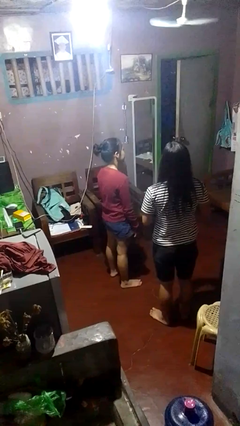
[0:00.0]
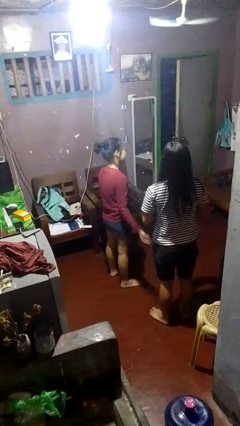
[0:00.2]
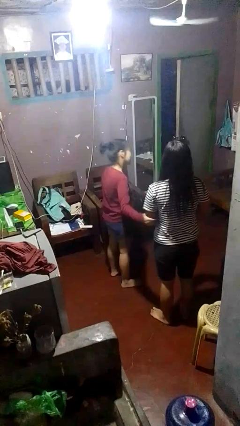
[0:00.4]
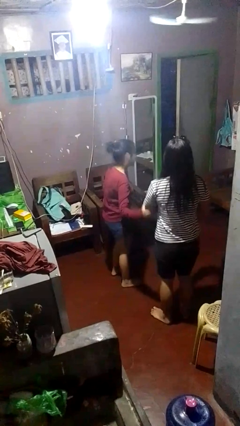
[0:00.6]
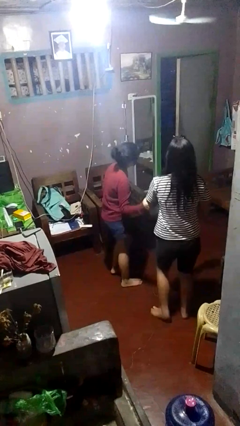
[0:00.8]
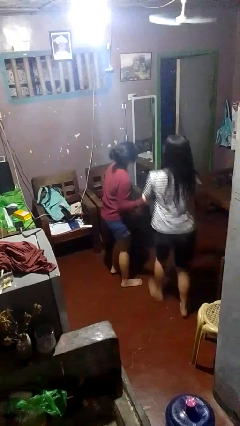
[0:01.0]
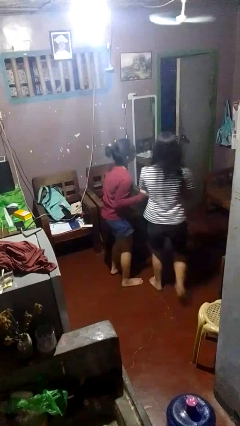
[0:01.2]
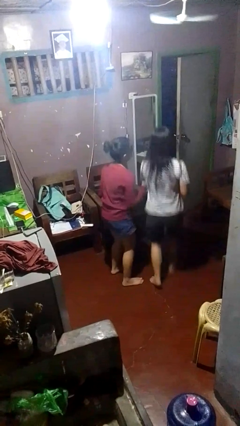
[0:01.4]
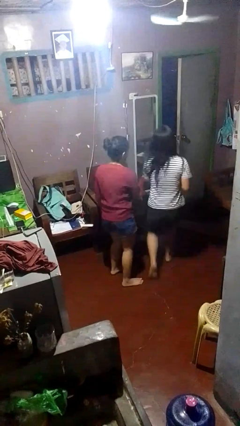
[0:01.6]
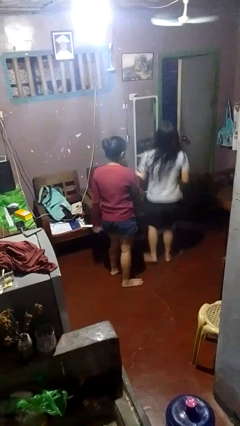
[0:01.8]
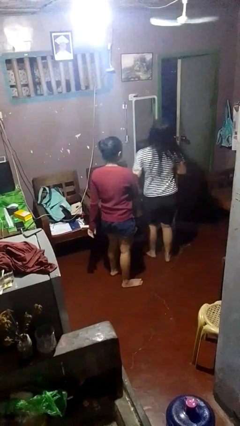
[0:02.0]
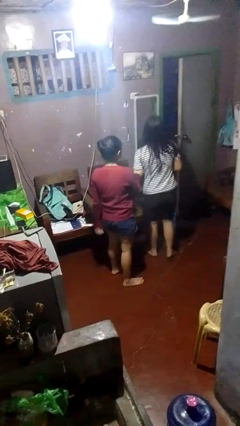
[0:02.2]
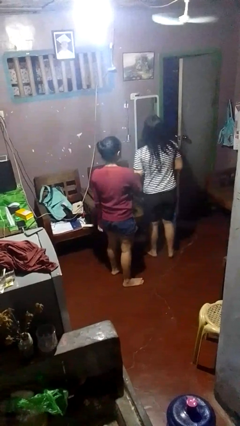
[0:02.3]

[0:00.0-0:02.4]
person grabs person by bicep

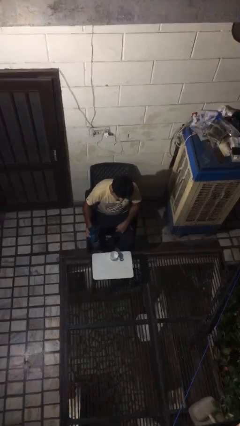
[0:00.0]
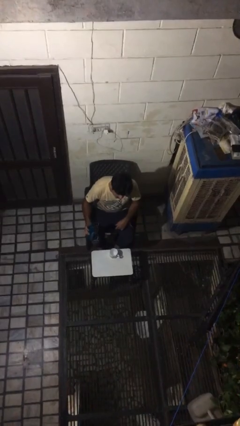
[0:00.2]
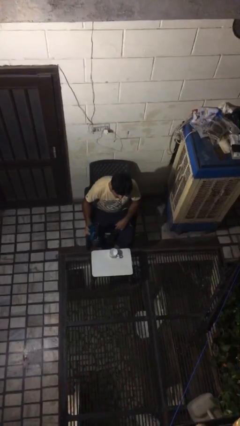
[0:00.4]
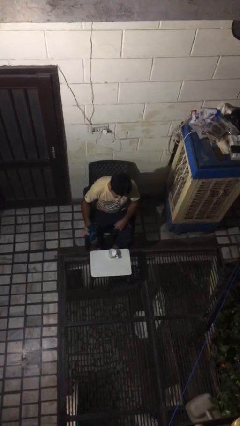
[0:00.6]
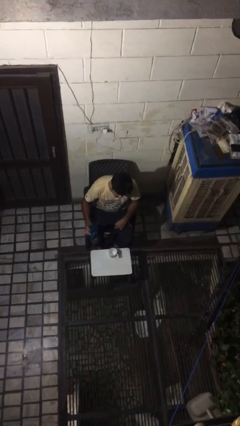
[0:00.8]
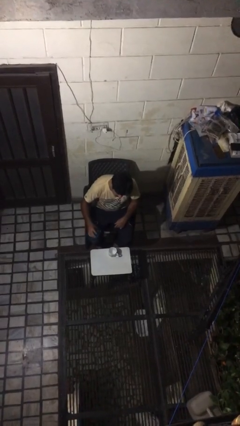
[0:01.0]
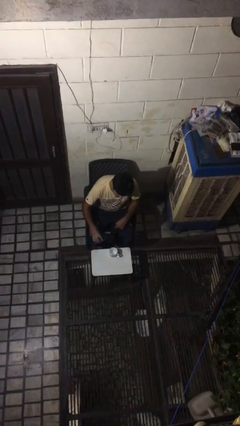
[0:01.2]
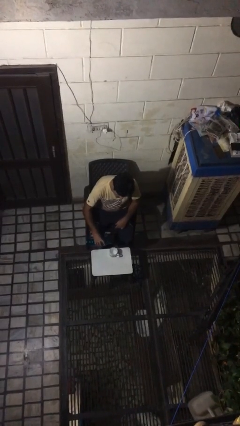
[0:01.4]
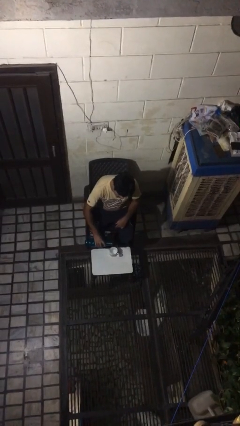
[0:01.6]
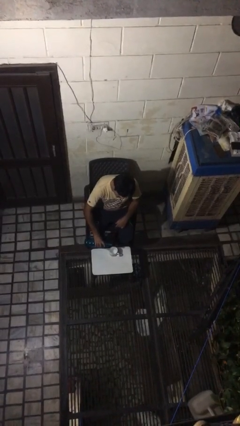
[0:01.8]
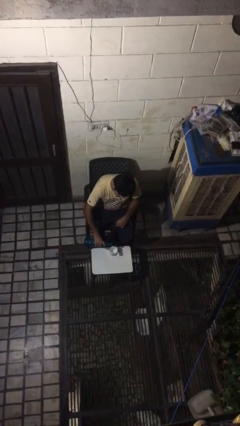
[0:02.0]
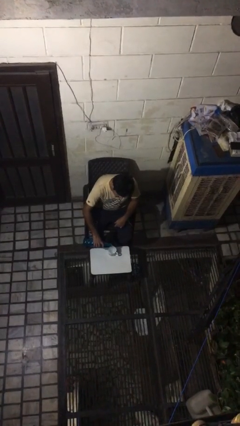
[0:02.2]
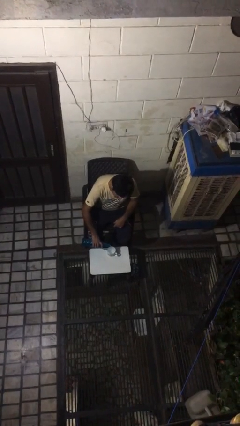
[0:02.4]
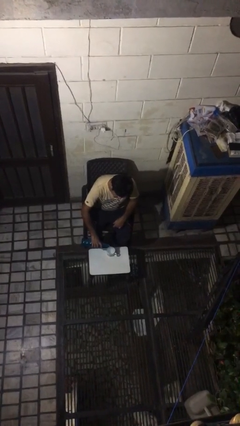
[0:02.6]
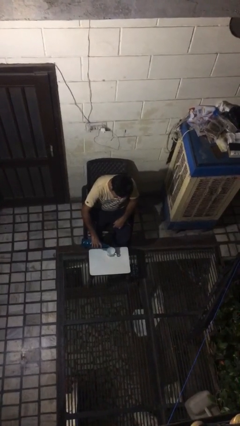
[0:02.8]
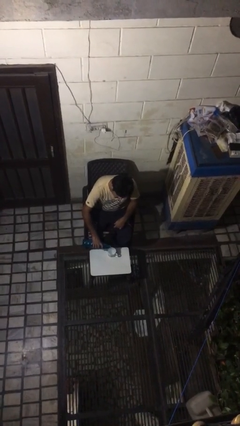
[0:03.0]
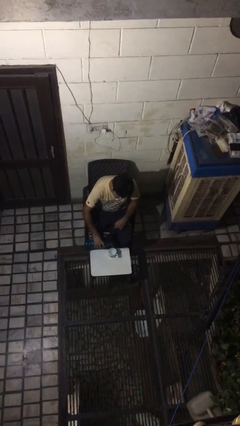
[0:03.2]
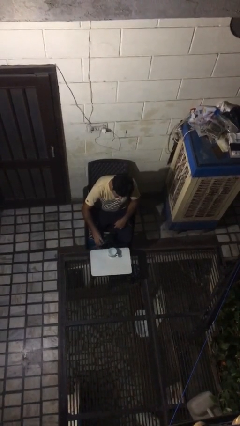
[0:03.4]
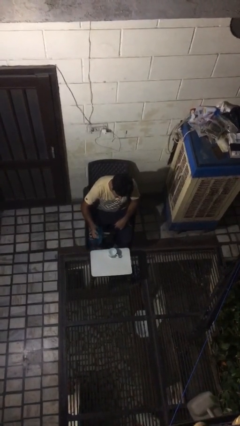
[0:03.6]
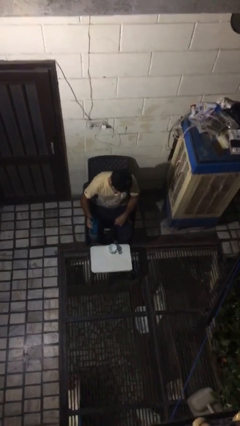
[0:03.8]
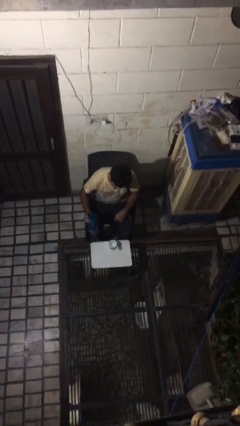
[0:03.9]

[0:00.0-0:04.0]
person pours liquid into cup

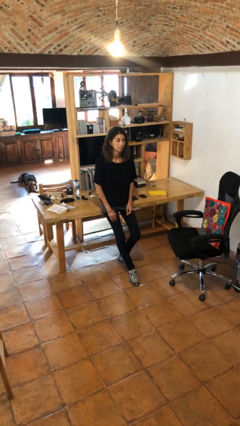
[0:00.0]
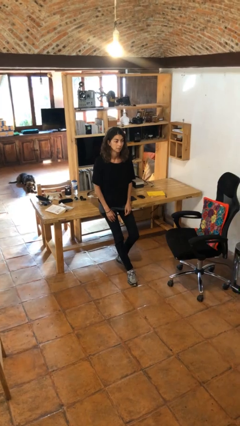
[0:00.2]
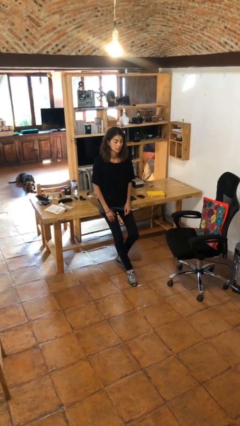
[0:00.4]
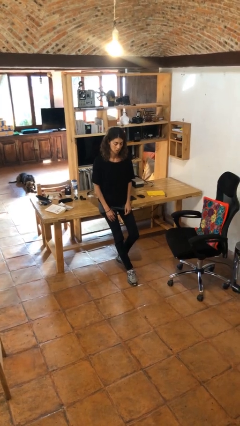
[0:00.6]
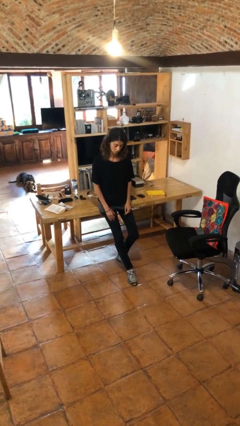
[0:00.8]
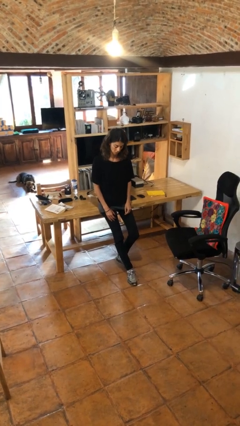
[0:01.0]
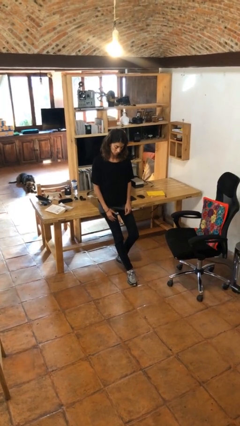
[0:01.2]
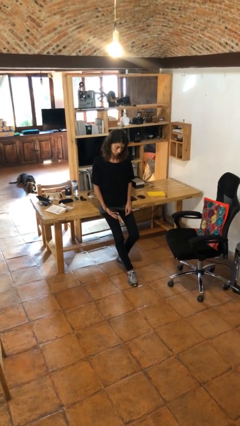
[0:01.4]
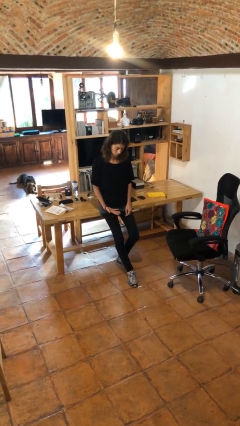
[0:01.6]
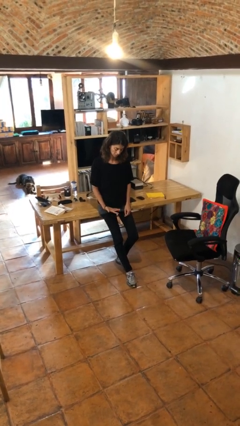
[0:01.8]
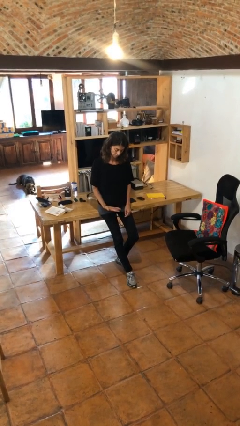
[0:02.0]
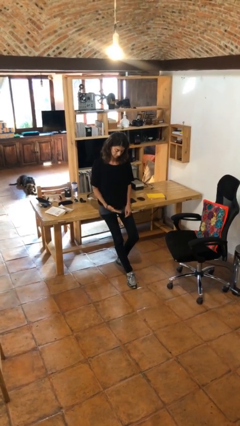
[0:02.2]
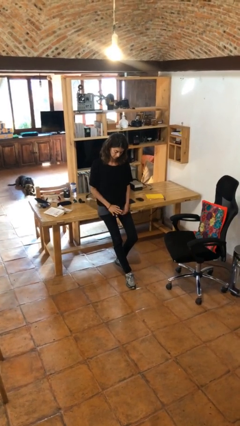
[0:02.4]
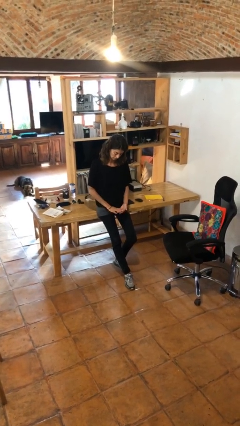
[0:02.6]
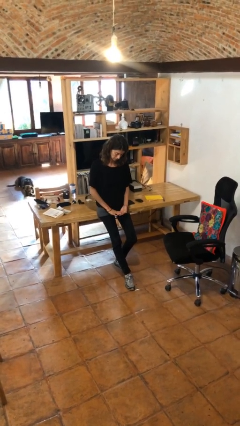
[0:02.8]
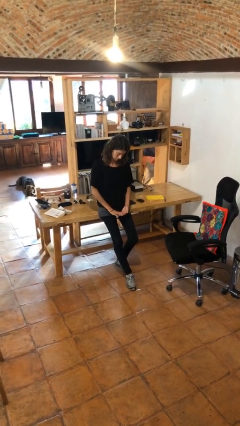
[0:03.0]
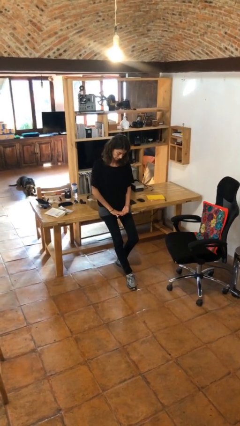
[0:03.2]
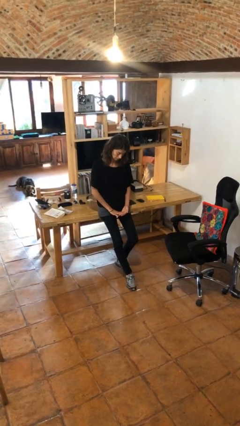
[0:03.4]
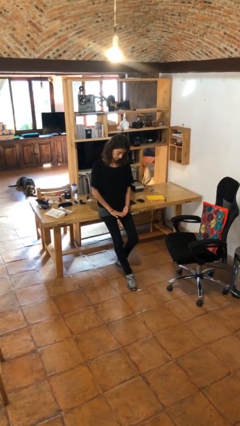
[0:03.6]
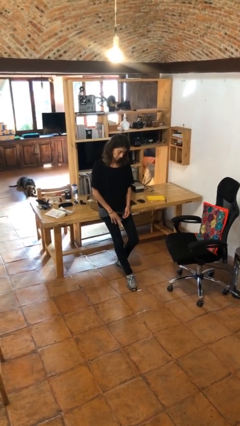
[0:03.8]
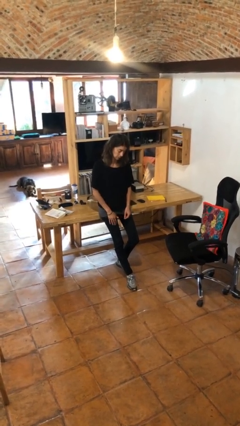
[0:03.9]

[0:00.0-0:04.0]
person looks at hands in lap

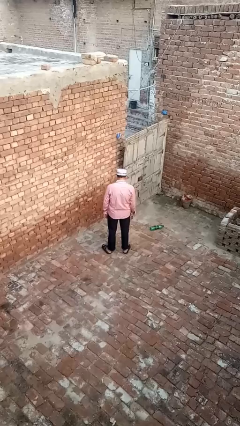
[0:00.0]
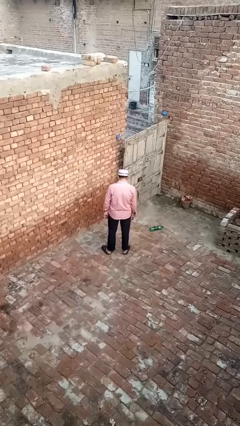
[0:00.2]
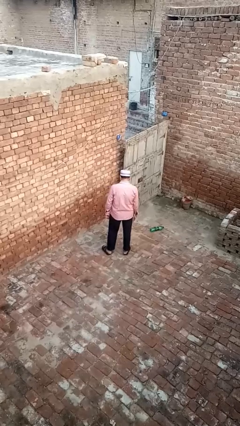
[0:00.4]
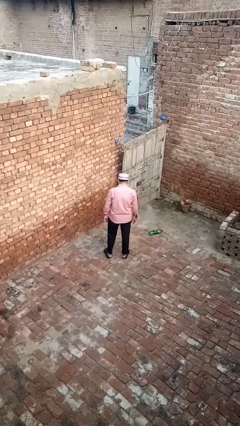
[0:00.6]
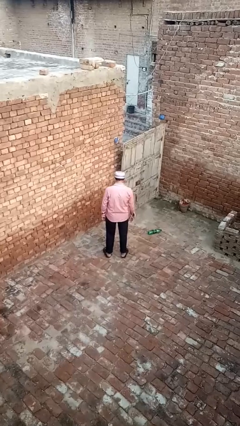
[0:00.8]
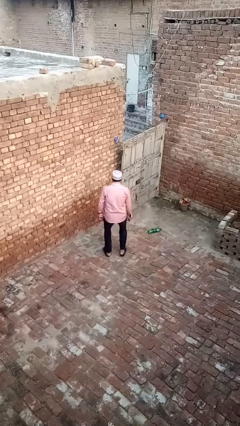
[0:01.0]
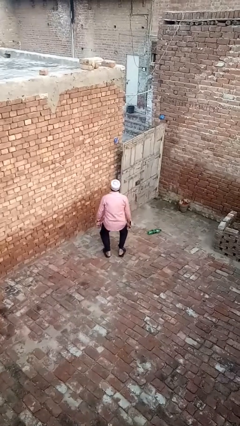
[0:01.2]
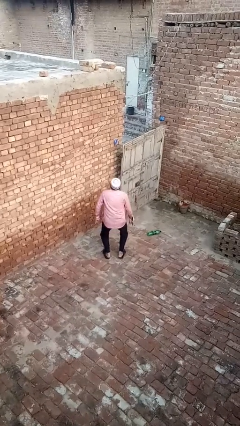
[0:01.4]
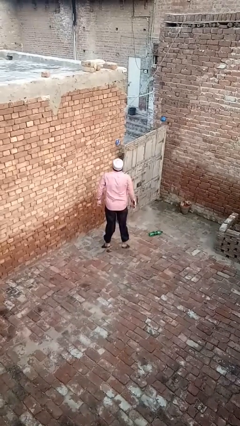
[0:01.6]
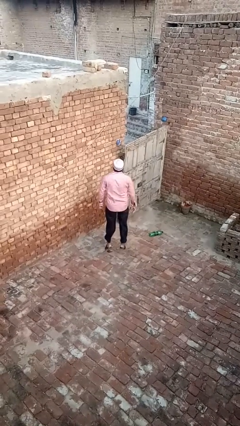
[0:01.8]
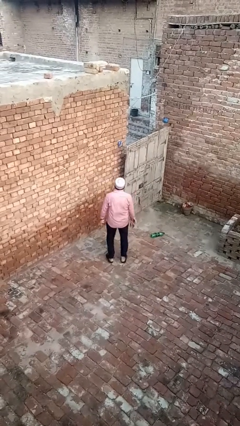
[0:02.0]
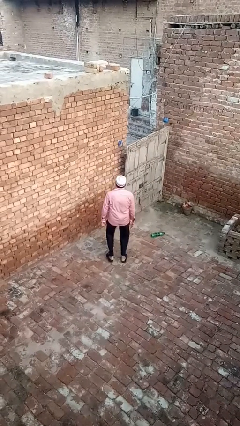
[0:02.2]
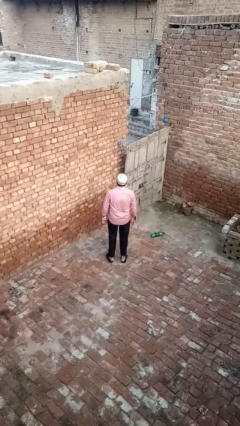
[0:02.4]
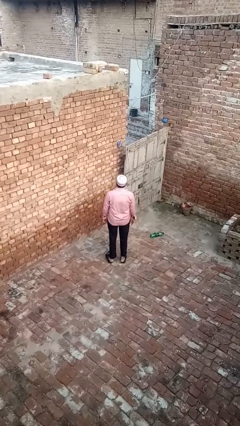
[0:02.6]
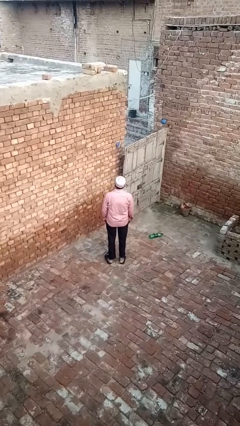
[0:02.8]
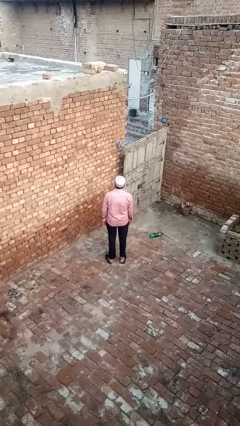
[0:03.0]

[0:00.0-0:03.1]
person jumps

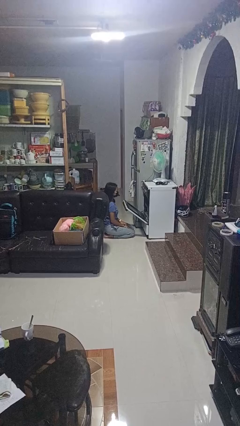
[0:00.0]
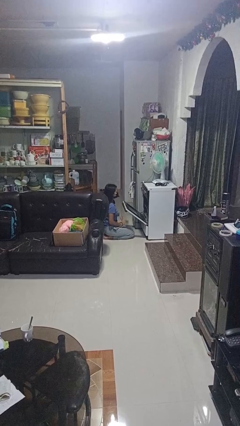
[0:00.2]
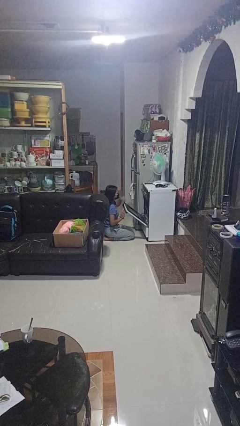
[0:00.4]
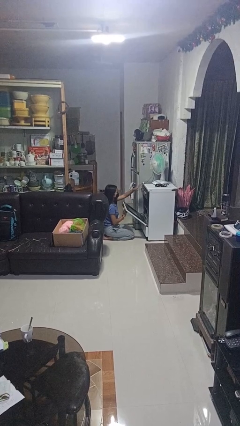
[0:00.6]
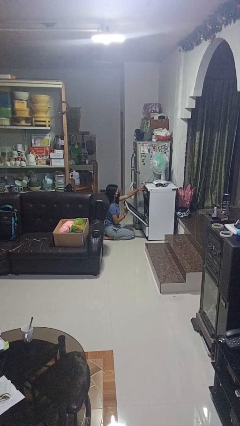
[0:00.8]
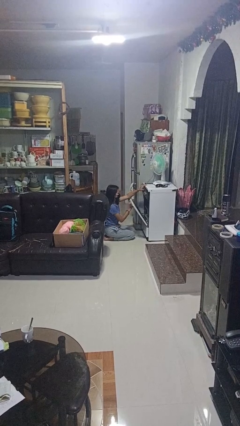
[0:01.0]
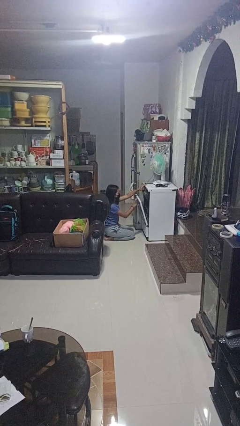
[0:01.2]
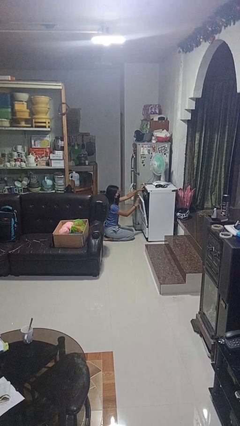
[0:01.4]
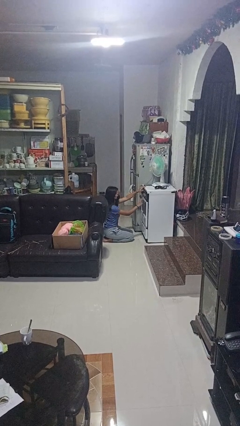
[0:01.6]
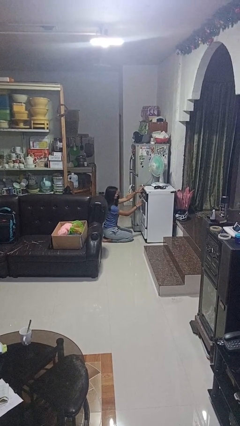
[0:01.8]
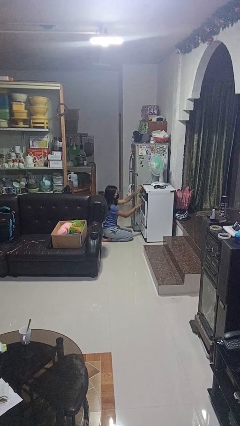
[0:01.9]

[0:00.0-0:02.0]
person closes oven door

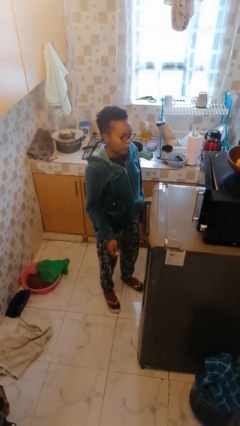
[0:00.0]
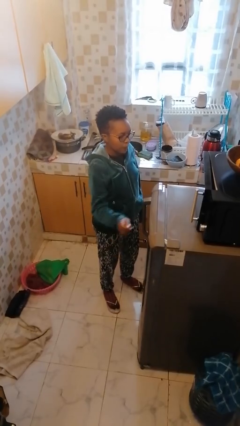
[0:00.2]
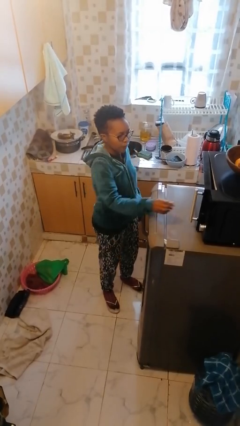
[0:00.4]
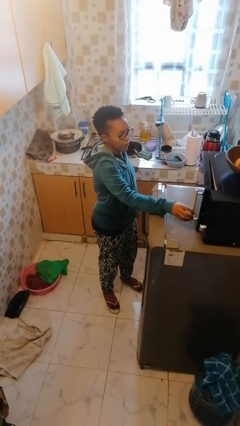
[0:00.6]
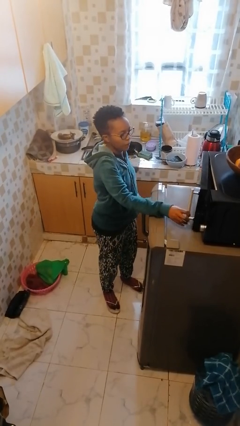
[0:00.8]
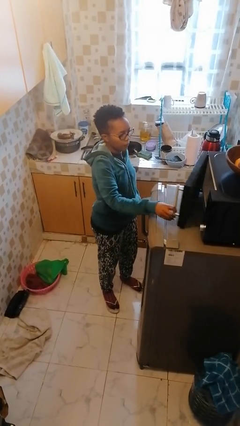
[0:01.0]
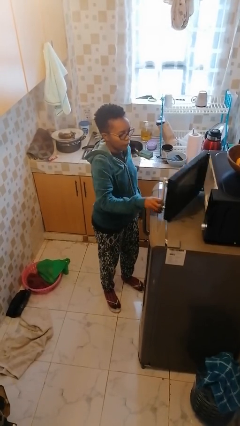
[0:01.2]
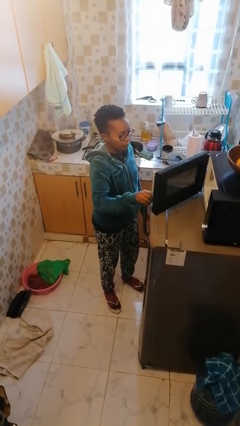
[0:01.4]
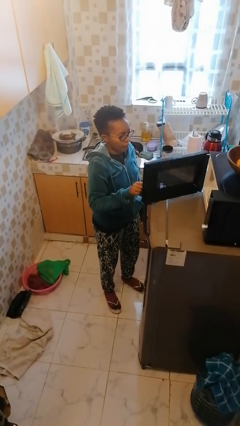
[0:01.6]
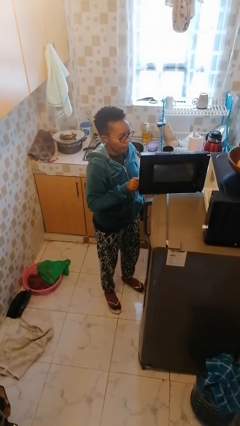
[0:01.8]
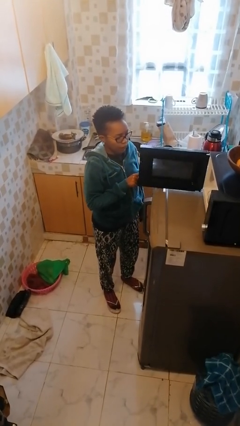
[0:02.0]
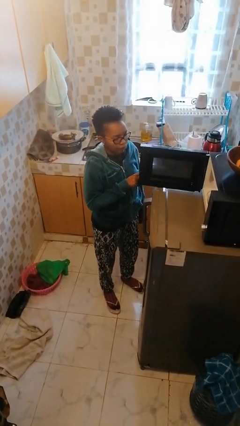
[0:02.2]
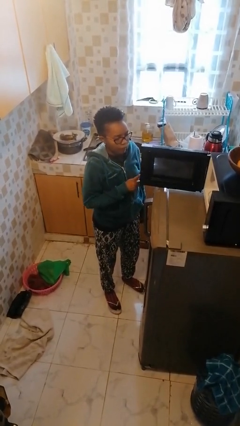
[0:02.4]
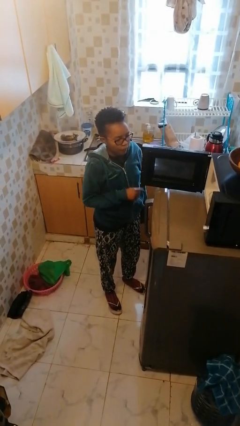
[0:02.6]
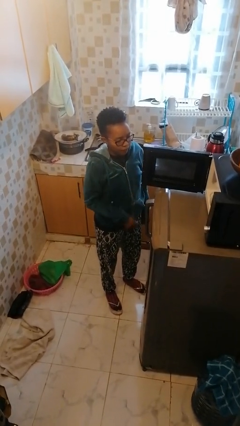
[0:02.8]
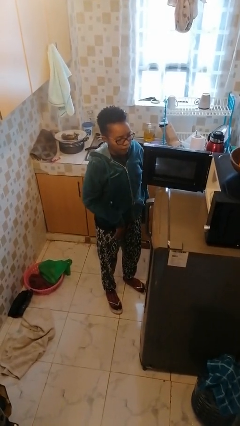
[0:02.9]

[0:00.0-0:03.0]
person opens microwave
